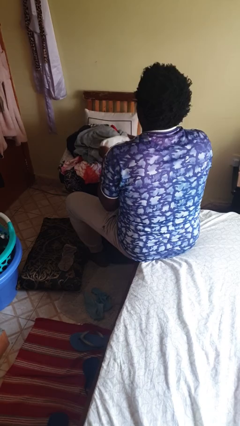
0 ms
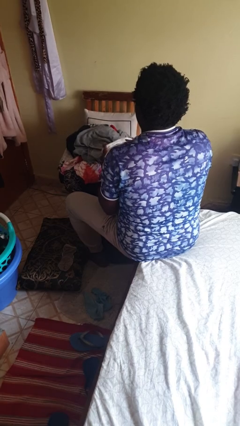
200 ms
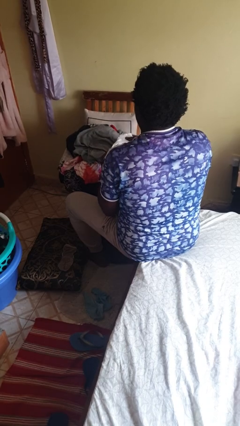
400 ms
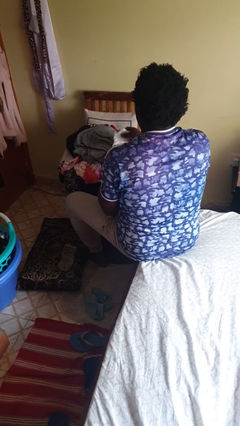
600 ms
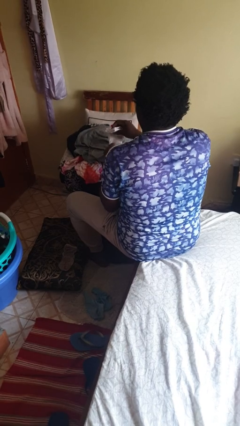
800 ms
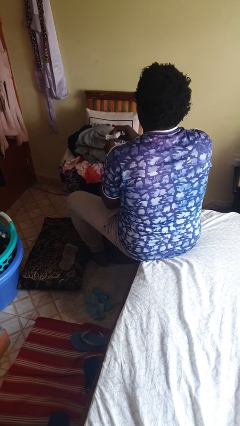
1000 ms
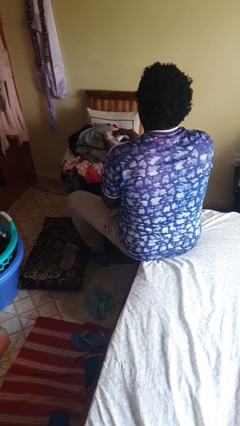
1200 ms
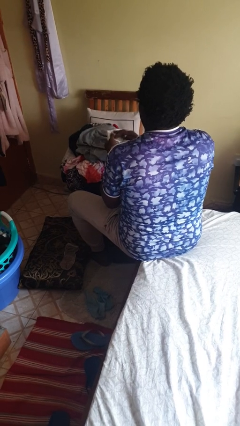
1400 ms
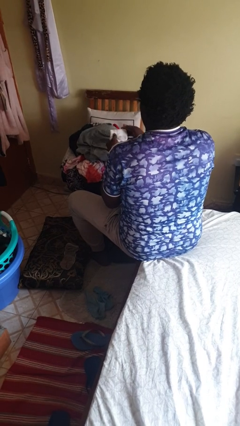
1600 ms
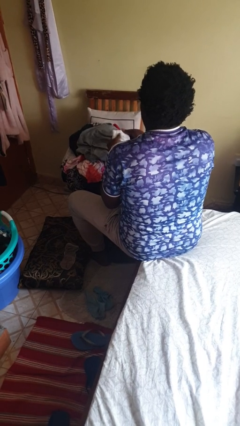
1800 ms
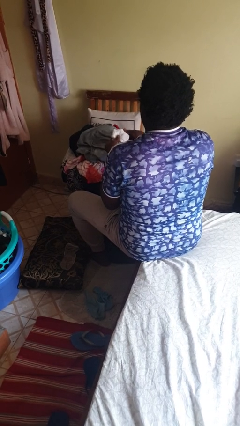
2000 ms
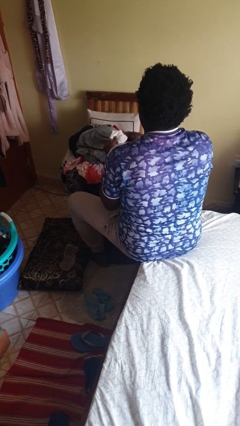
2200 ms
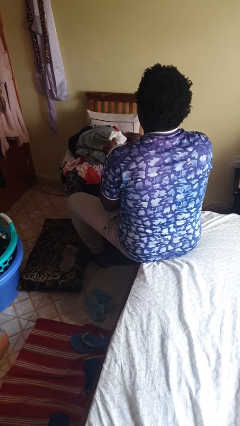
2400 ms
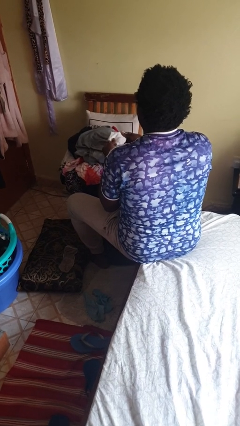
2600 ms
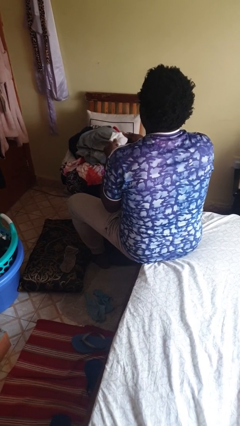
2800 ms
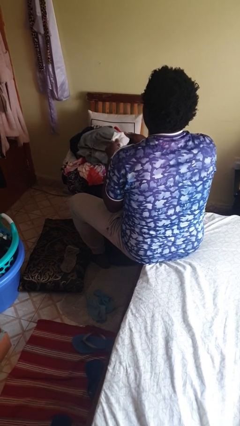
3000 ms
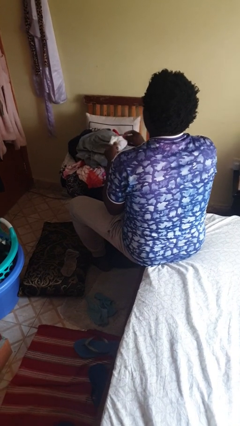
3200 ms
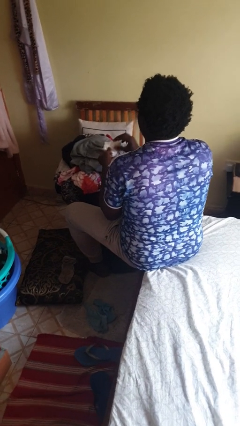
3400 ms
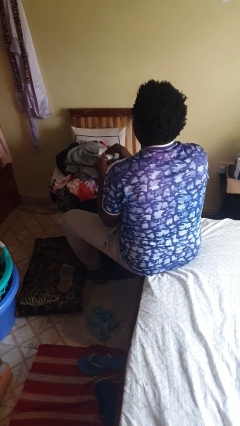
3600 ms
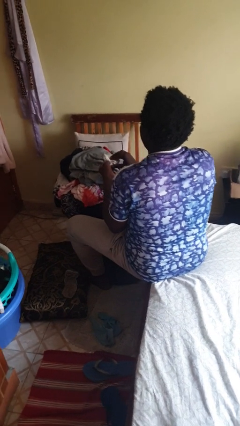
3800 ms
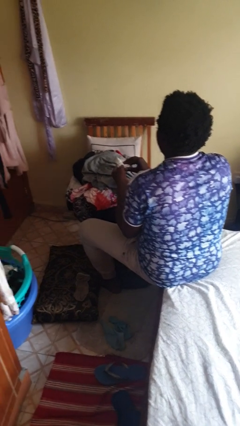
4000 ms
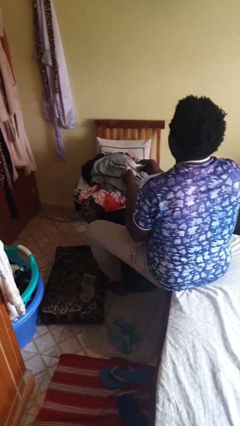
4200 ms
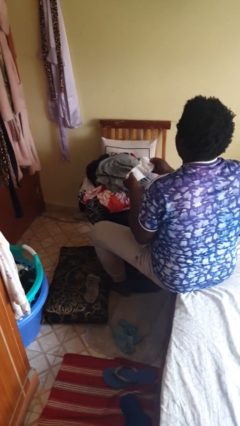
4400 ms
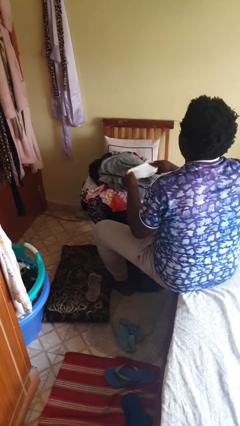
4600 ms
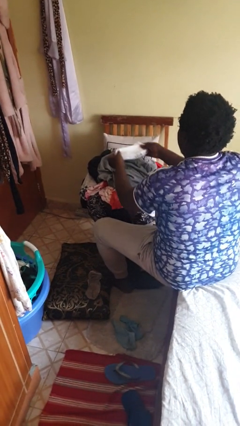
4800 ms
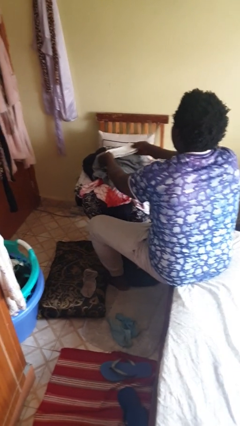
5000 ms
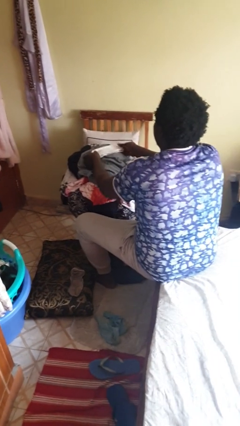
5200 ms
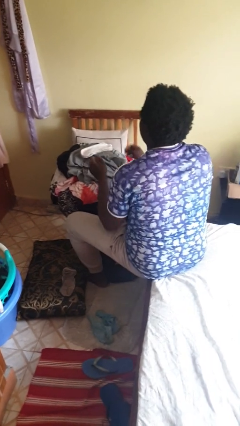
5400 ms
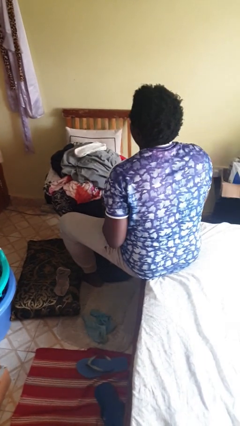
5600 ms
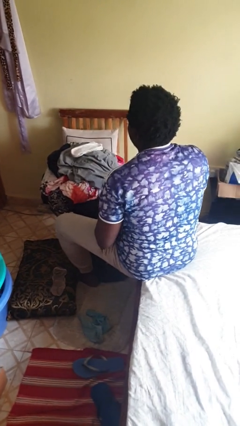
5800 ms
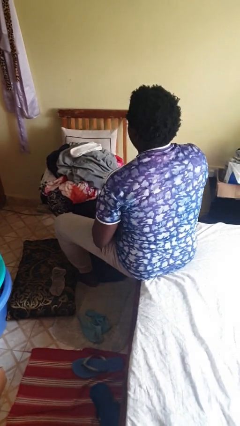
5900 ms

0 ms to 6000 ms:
person folds socks

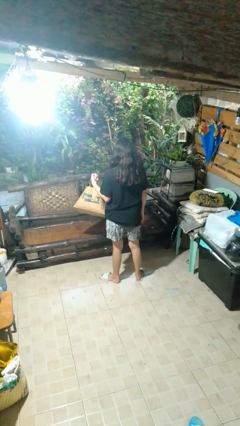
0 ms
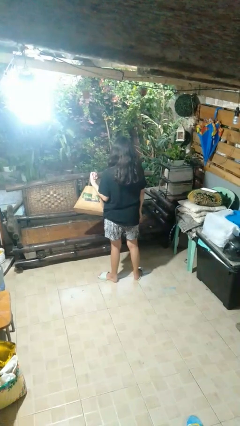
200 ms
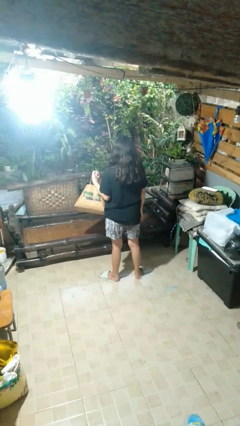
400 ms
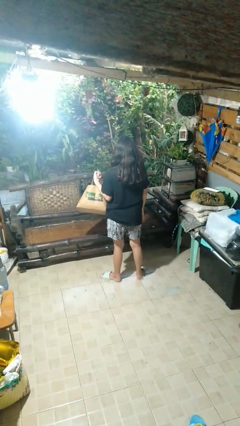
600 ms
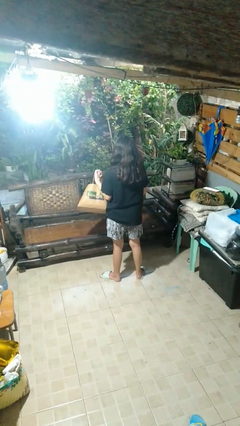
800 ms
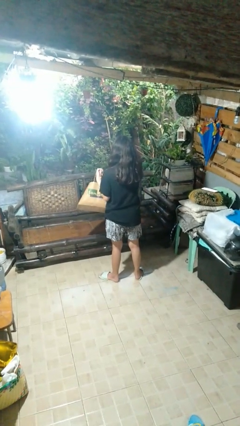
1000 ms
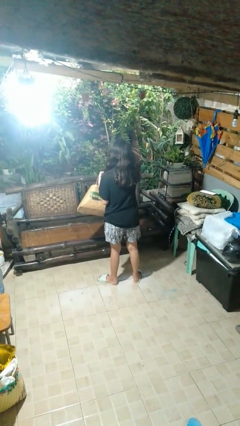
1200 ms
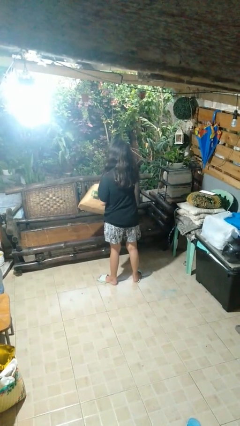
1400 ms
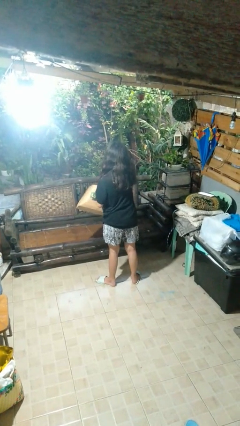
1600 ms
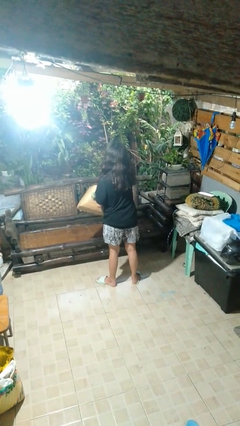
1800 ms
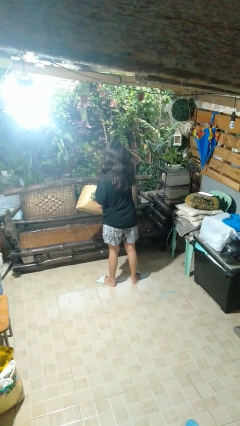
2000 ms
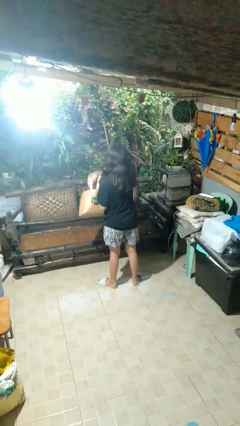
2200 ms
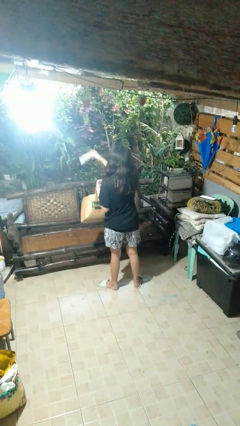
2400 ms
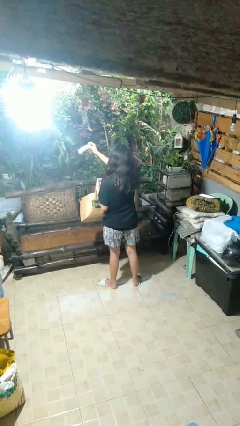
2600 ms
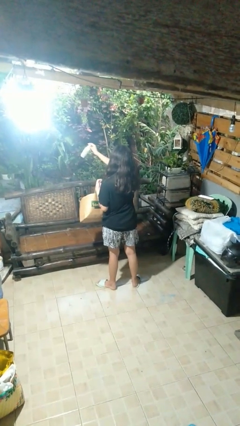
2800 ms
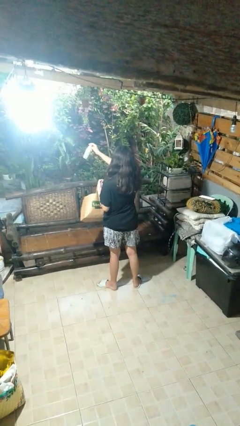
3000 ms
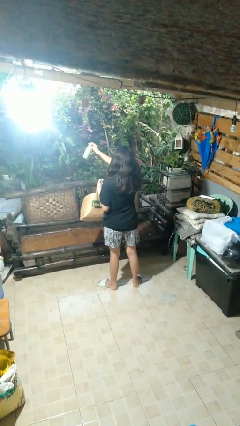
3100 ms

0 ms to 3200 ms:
person takes object from bag

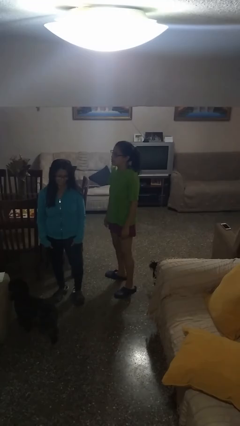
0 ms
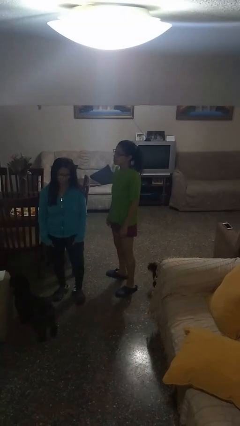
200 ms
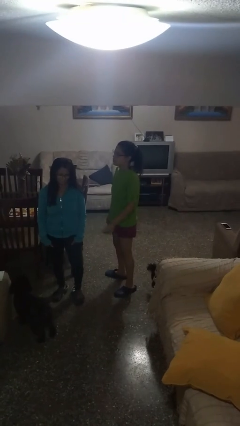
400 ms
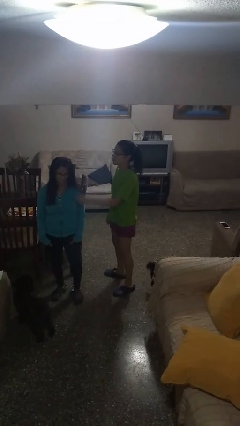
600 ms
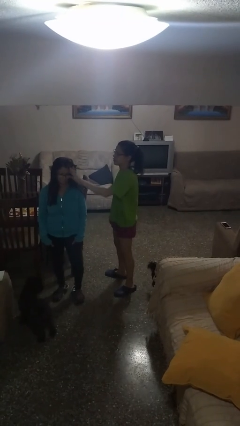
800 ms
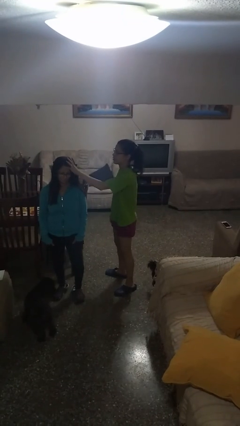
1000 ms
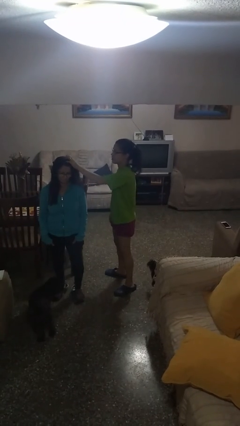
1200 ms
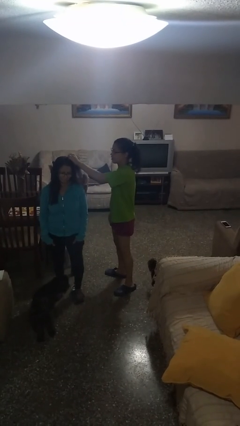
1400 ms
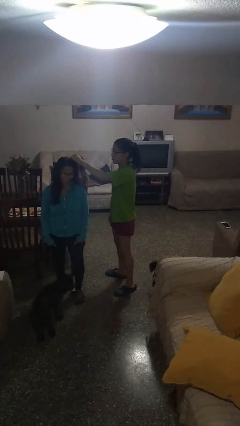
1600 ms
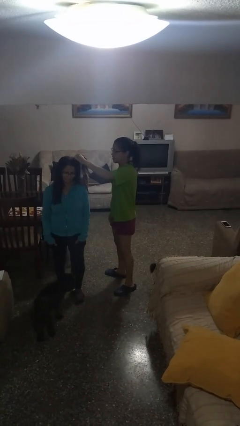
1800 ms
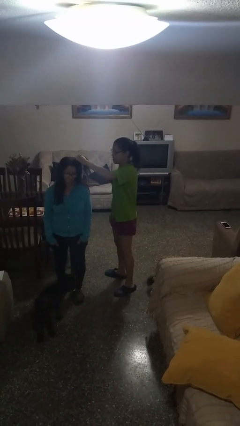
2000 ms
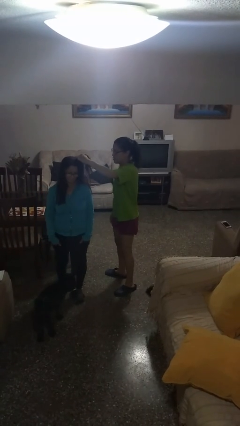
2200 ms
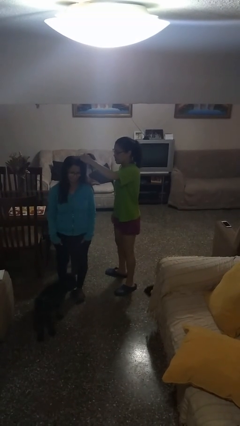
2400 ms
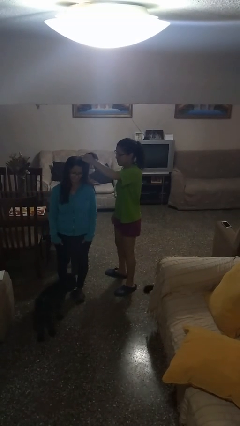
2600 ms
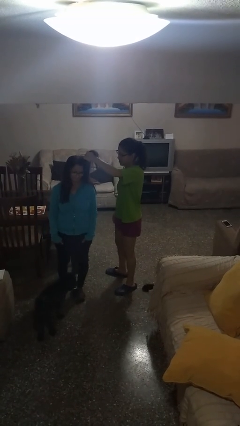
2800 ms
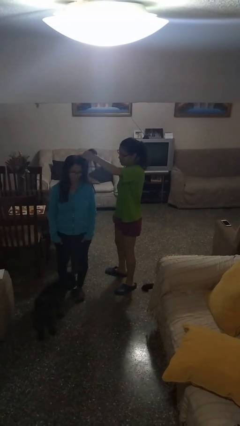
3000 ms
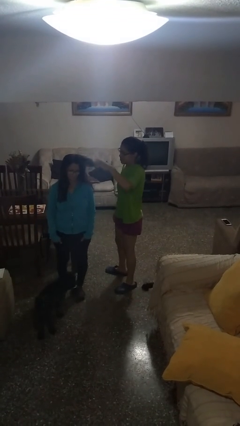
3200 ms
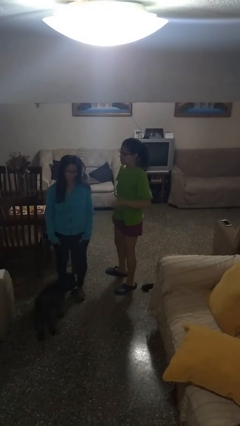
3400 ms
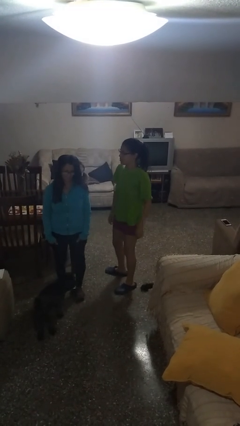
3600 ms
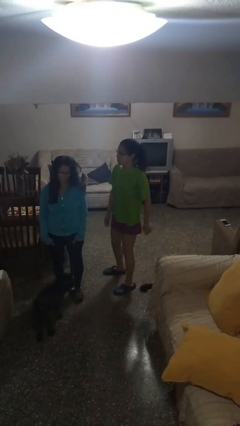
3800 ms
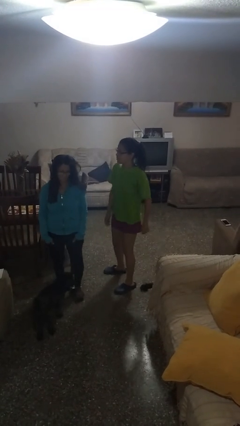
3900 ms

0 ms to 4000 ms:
person grabs person by hair

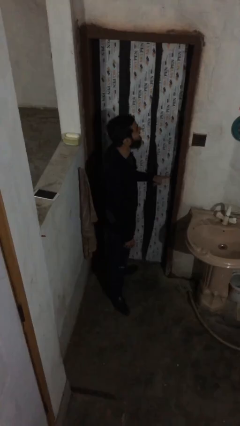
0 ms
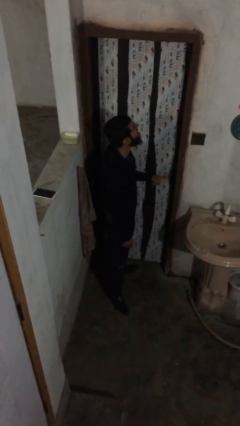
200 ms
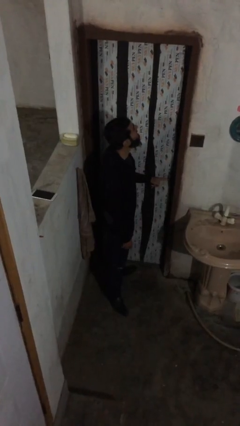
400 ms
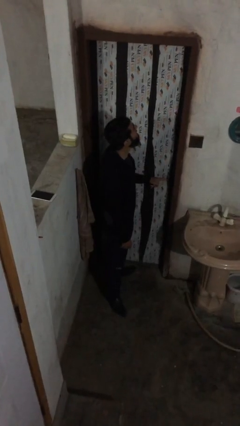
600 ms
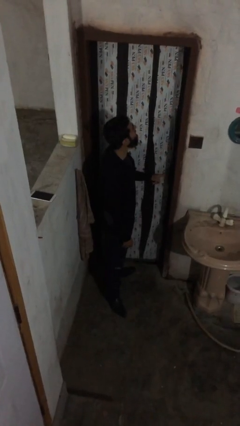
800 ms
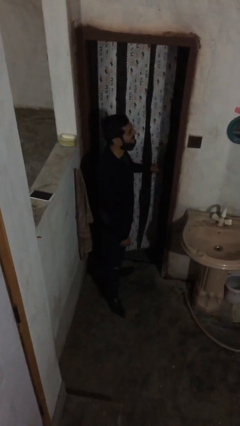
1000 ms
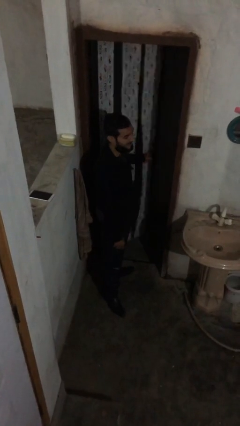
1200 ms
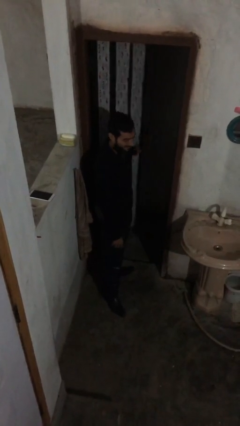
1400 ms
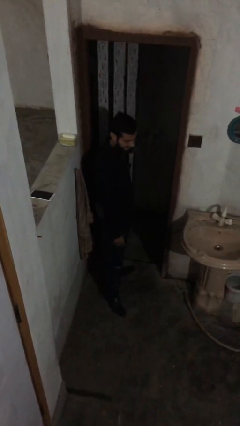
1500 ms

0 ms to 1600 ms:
person opens facility door

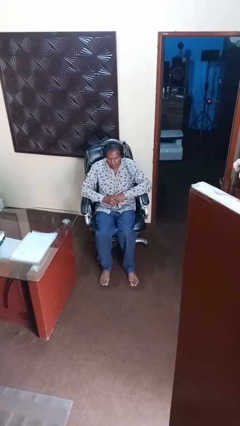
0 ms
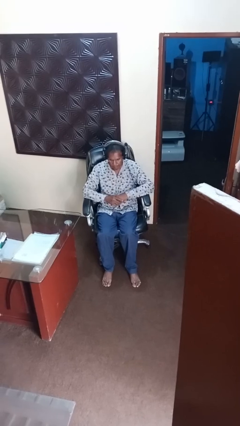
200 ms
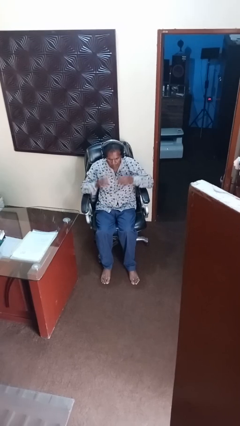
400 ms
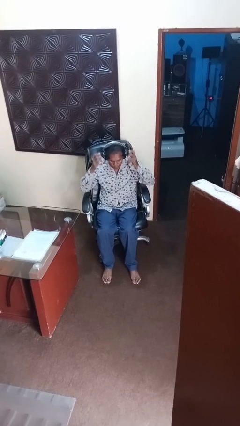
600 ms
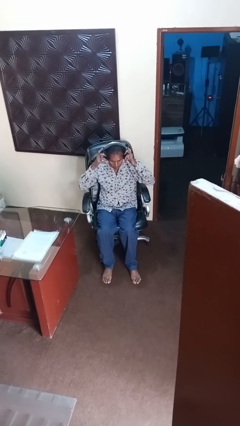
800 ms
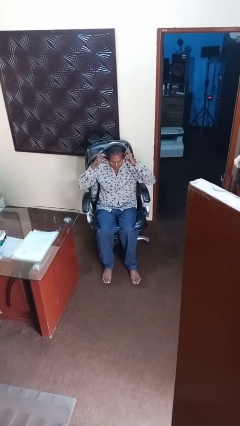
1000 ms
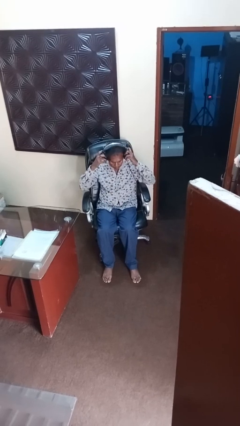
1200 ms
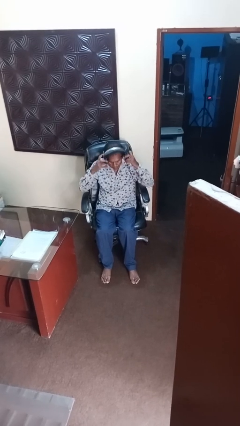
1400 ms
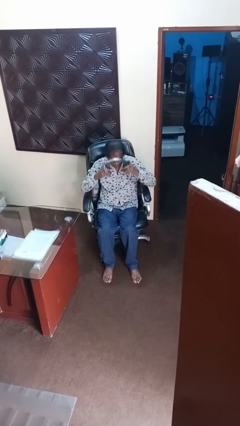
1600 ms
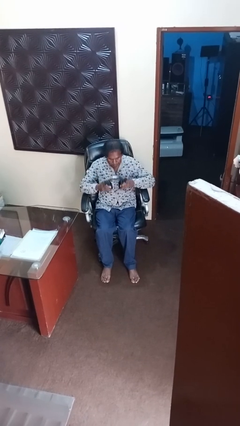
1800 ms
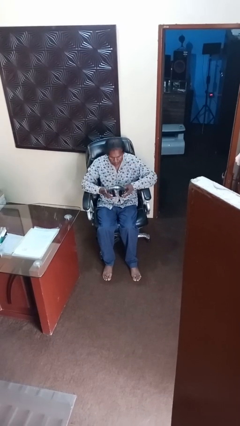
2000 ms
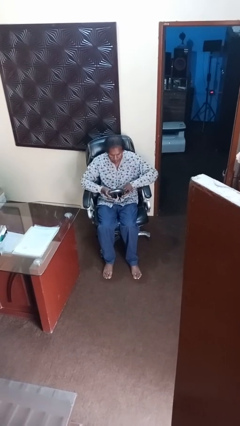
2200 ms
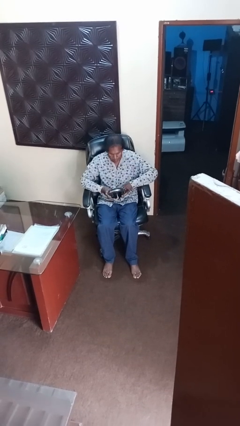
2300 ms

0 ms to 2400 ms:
person takes off headphones

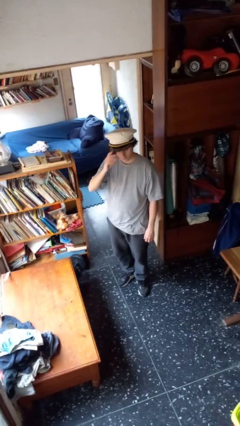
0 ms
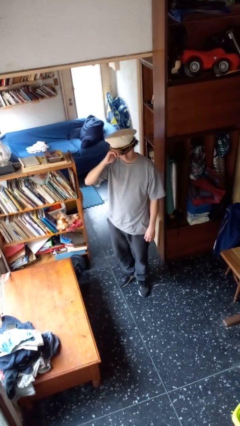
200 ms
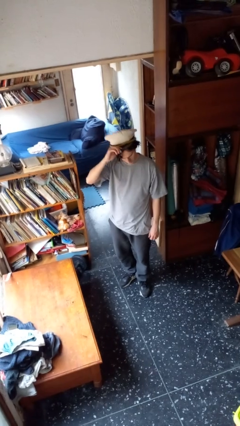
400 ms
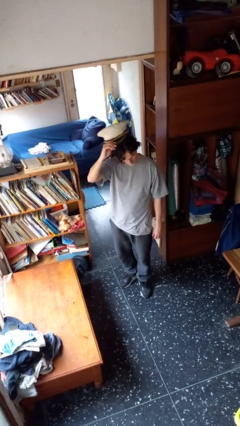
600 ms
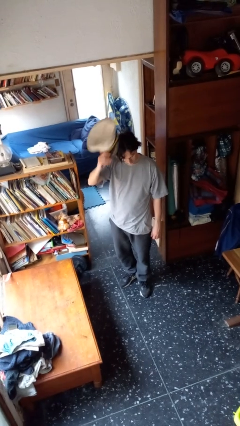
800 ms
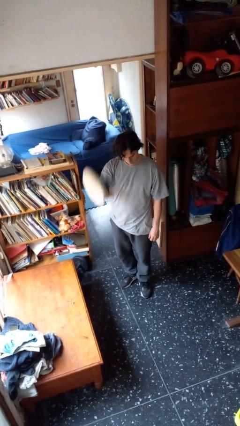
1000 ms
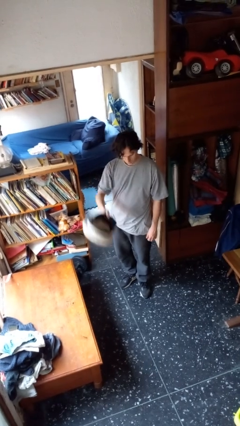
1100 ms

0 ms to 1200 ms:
person takes off hat
